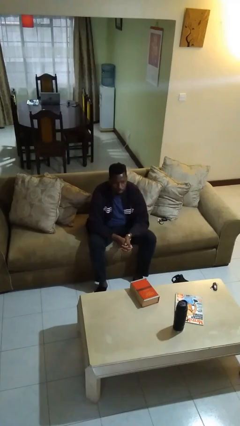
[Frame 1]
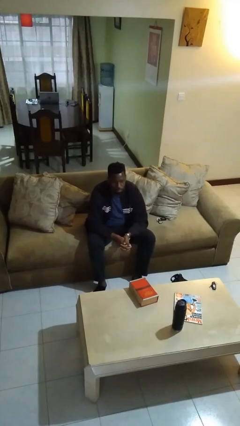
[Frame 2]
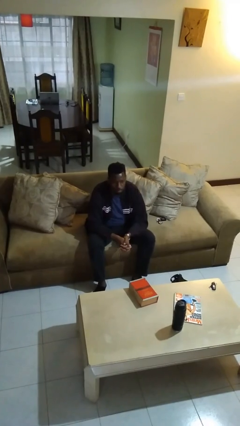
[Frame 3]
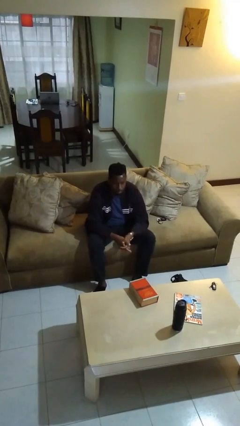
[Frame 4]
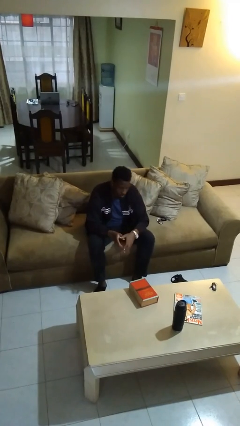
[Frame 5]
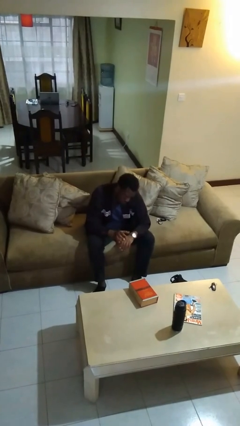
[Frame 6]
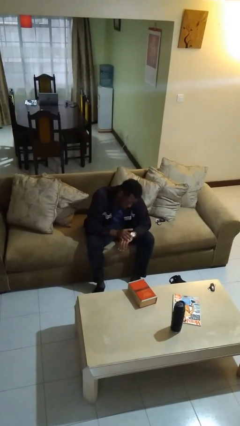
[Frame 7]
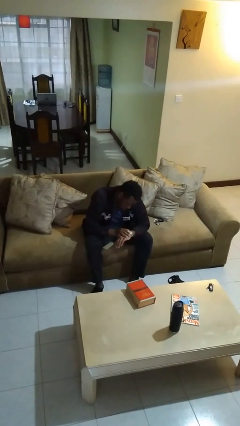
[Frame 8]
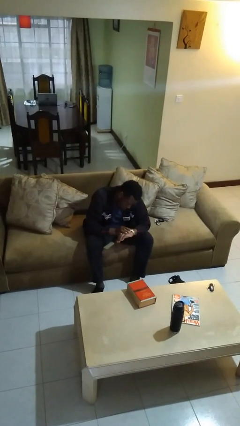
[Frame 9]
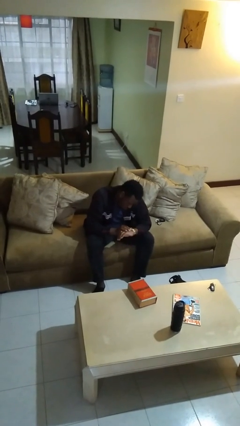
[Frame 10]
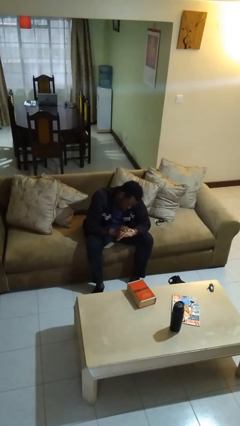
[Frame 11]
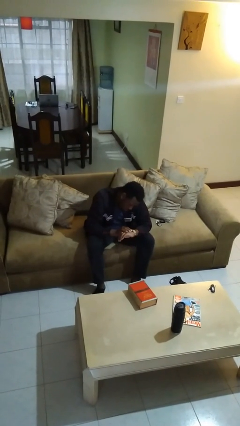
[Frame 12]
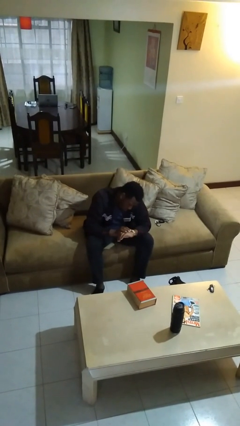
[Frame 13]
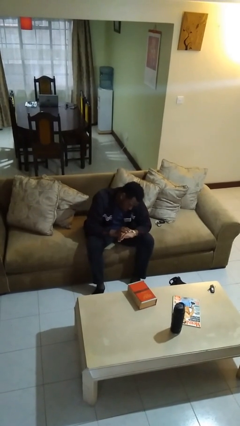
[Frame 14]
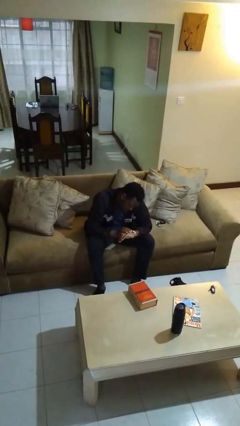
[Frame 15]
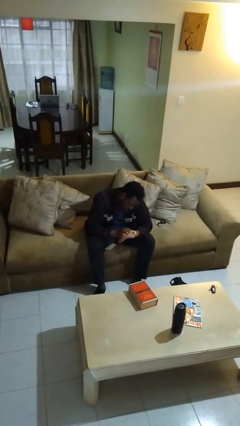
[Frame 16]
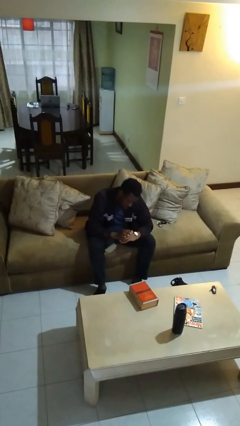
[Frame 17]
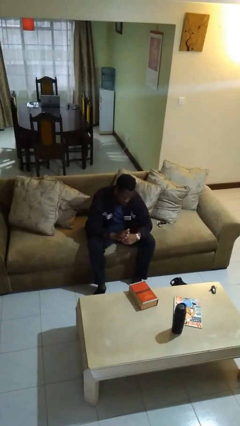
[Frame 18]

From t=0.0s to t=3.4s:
person looks at wristwatch

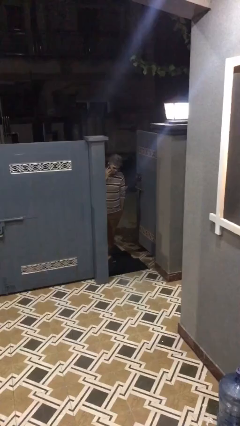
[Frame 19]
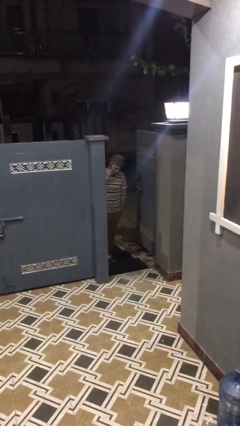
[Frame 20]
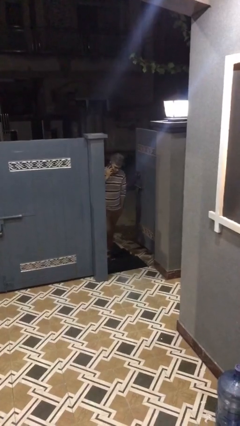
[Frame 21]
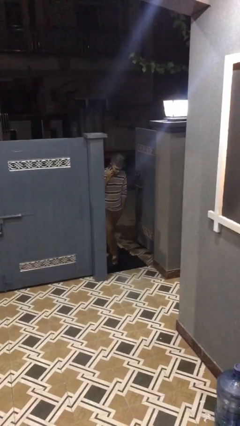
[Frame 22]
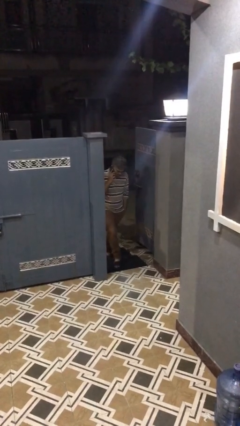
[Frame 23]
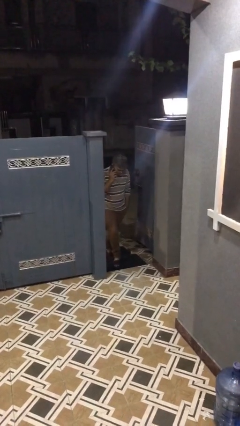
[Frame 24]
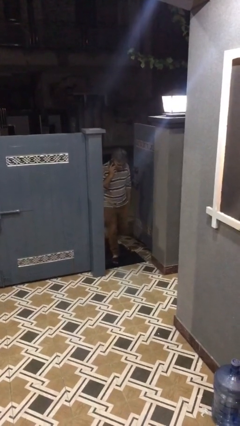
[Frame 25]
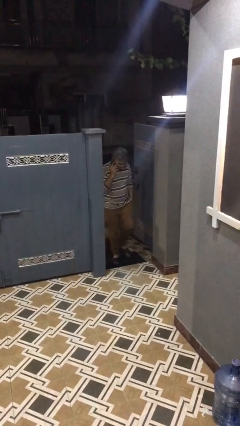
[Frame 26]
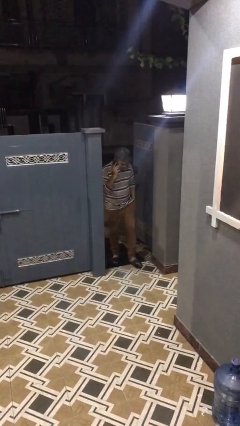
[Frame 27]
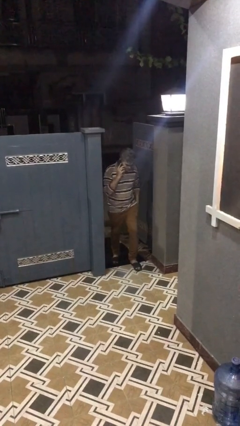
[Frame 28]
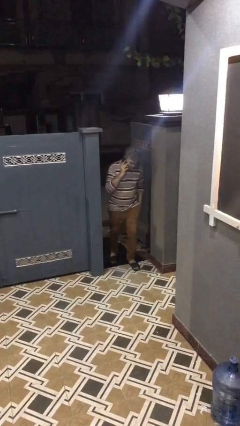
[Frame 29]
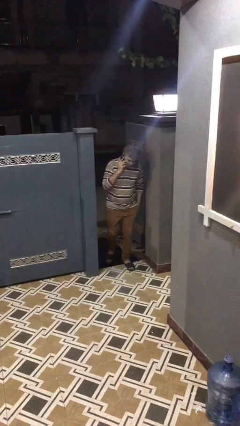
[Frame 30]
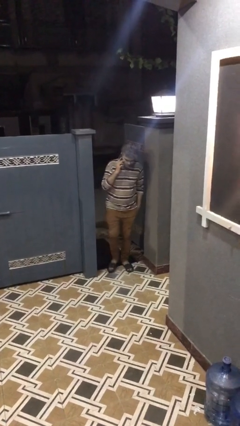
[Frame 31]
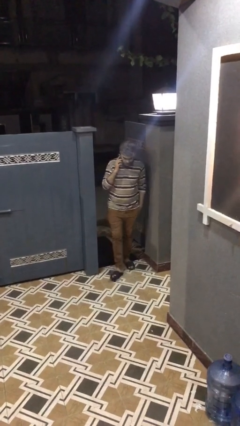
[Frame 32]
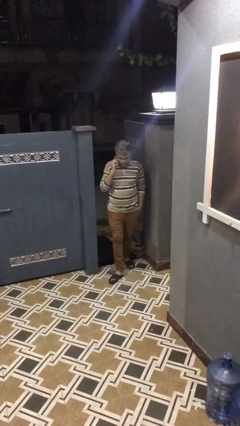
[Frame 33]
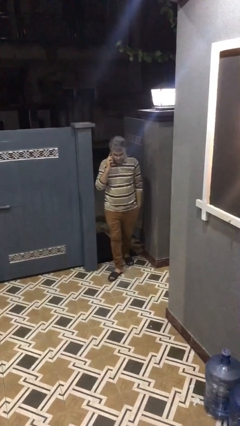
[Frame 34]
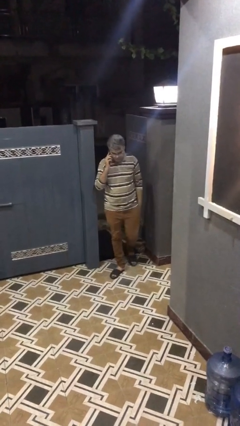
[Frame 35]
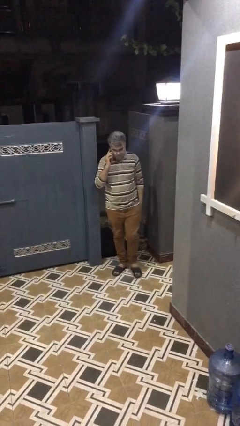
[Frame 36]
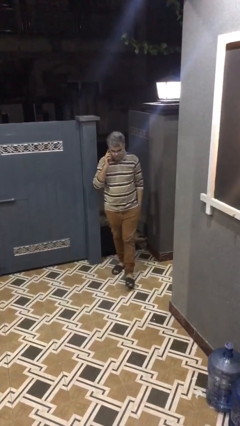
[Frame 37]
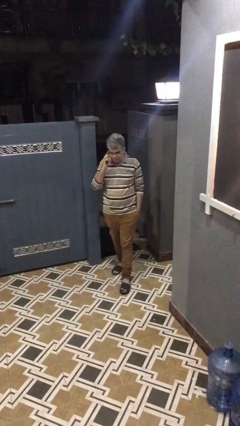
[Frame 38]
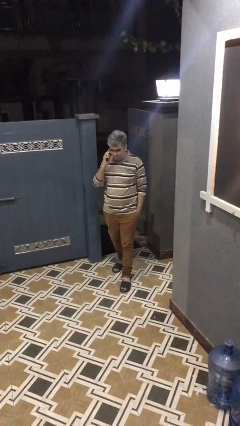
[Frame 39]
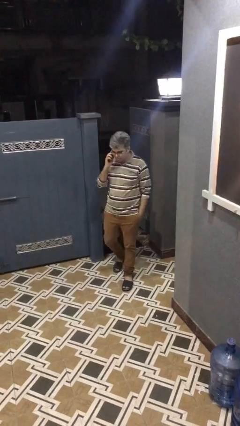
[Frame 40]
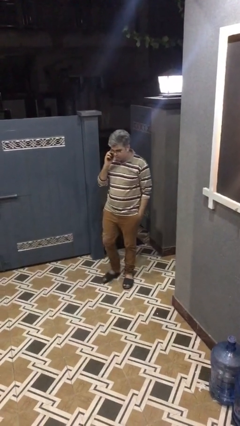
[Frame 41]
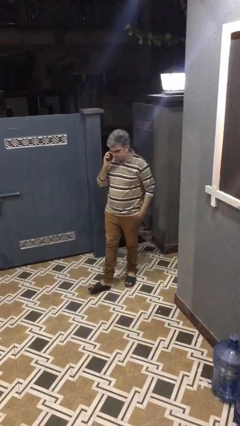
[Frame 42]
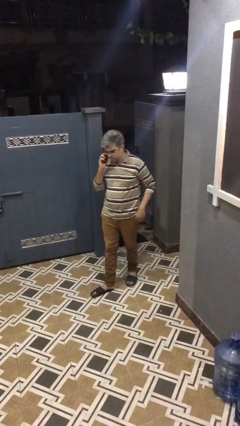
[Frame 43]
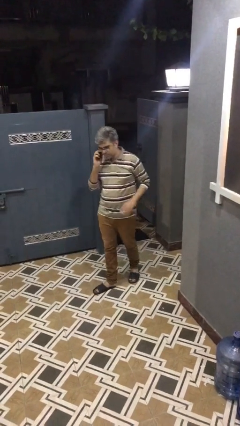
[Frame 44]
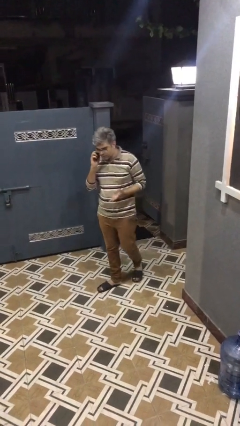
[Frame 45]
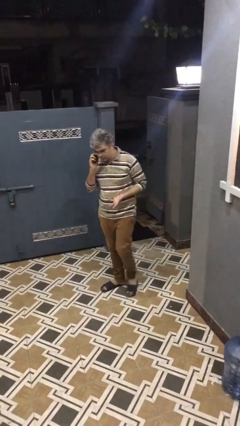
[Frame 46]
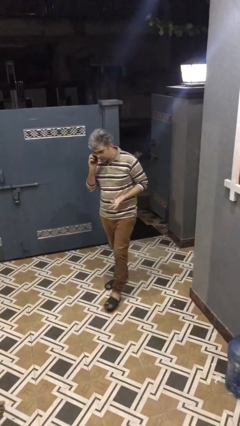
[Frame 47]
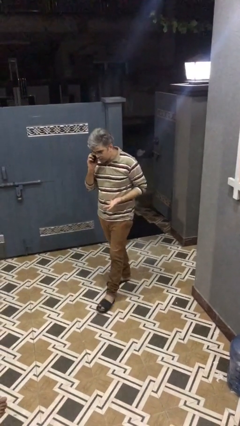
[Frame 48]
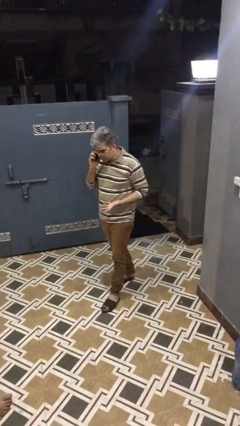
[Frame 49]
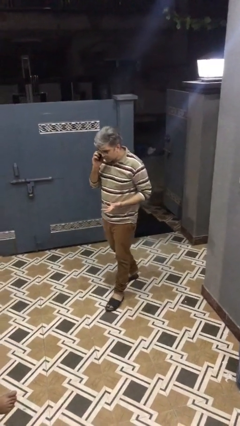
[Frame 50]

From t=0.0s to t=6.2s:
person enters scene through structure

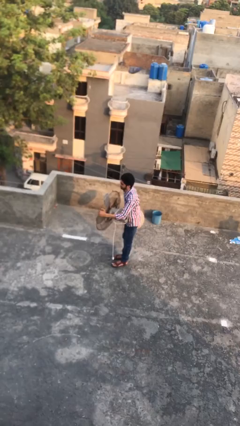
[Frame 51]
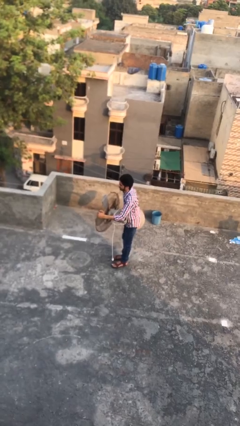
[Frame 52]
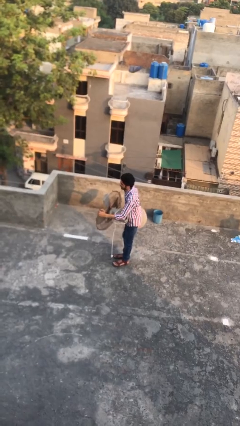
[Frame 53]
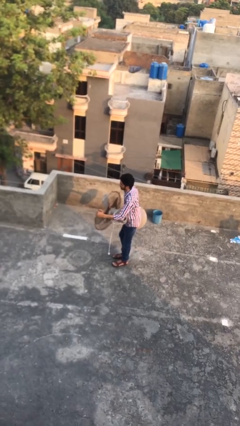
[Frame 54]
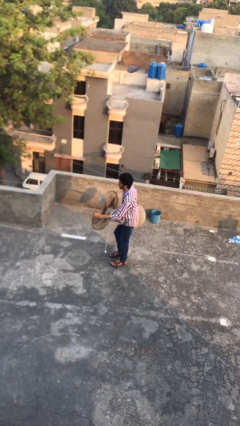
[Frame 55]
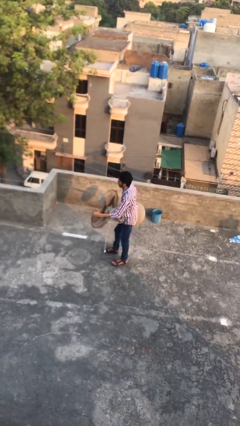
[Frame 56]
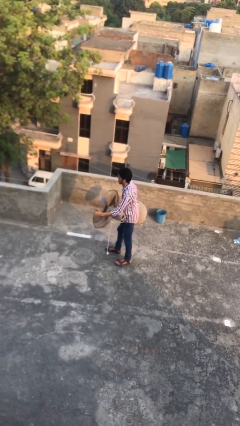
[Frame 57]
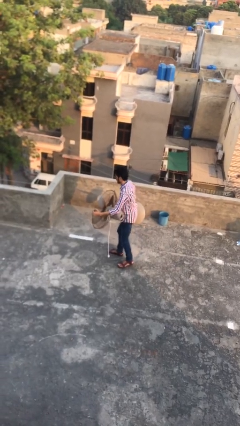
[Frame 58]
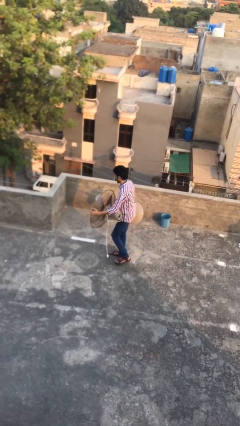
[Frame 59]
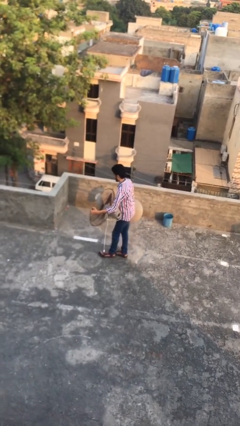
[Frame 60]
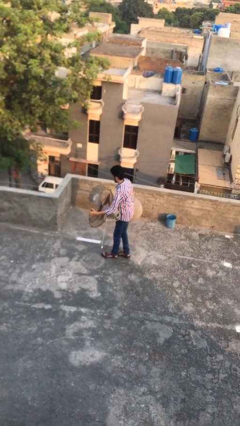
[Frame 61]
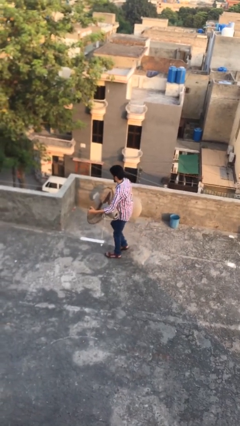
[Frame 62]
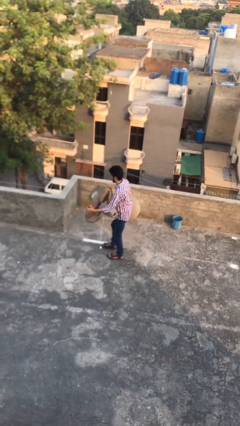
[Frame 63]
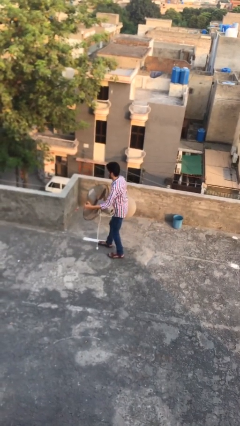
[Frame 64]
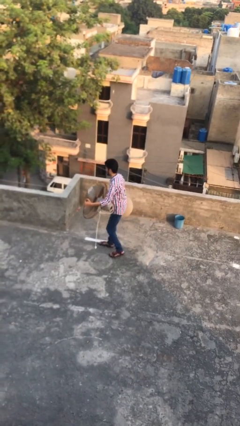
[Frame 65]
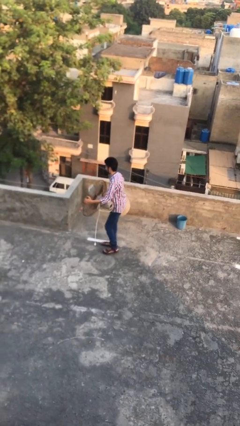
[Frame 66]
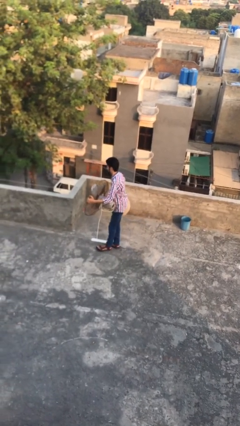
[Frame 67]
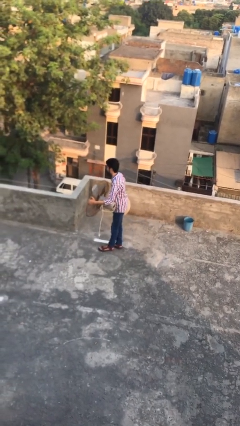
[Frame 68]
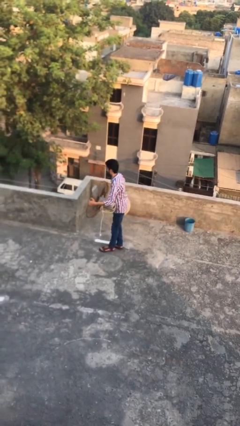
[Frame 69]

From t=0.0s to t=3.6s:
person carries heavy object

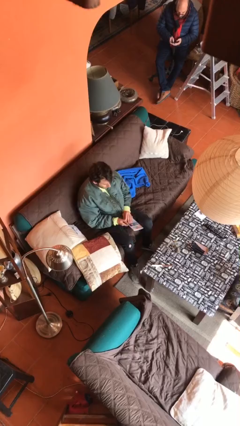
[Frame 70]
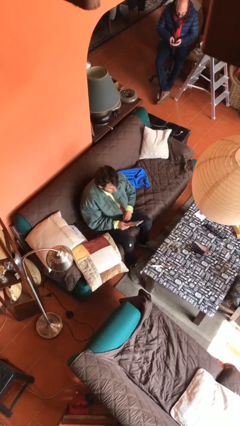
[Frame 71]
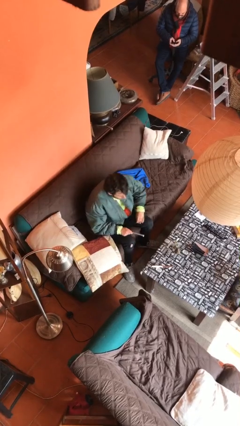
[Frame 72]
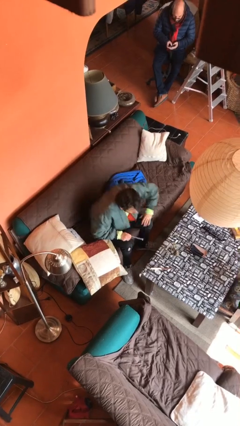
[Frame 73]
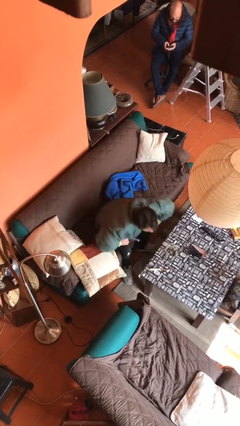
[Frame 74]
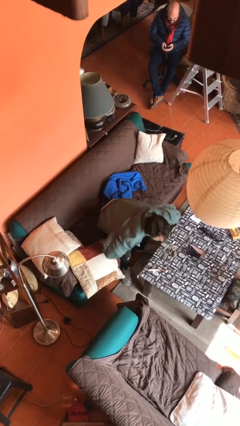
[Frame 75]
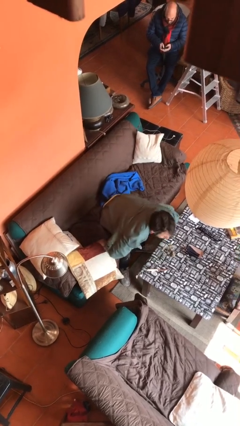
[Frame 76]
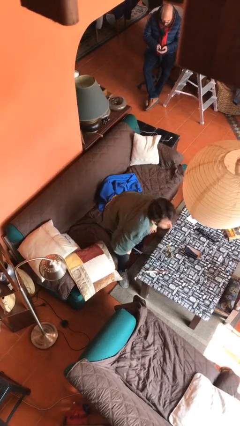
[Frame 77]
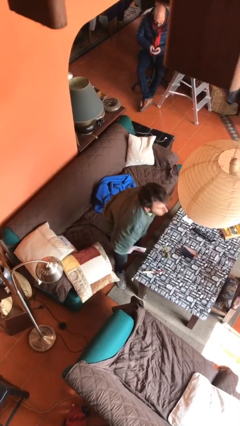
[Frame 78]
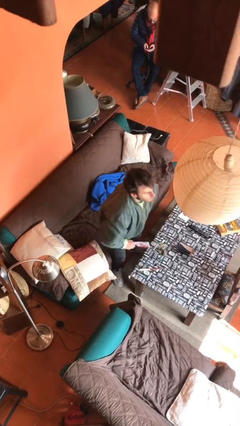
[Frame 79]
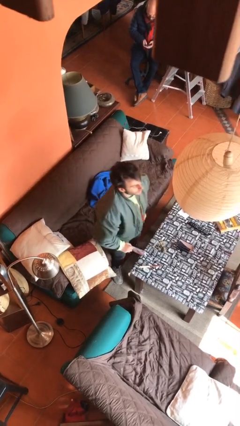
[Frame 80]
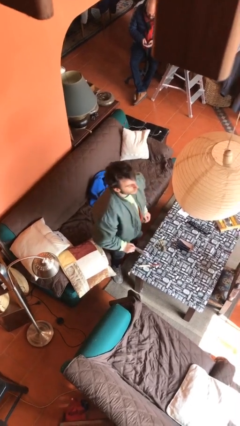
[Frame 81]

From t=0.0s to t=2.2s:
person stands up

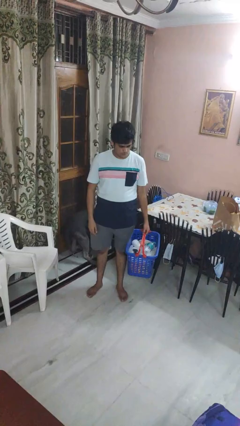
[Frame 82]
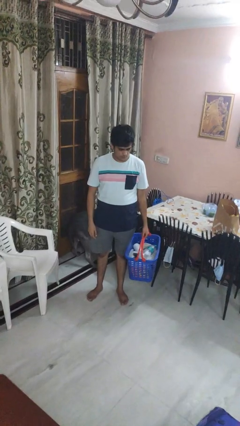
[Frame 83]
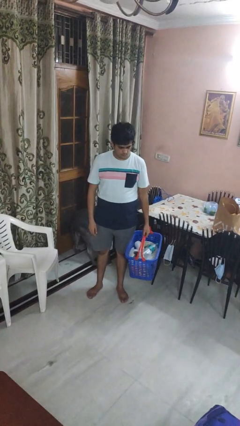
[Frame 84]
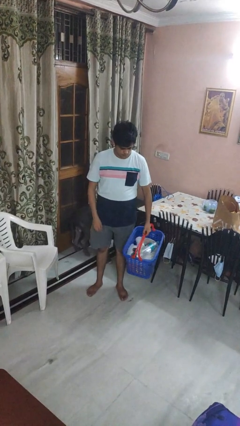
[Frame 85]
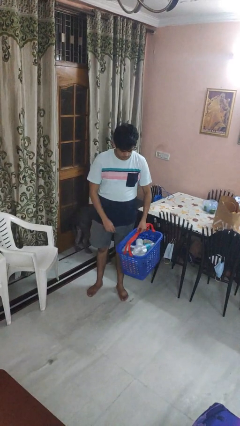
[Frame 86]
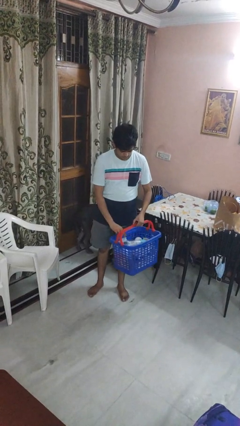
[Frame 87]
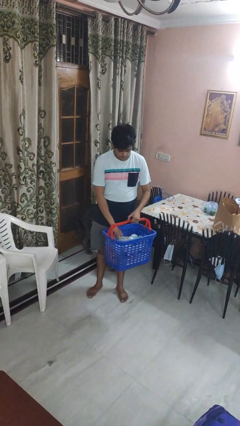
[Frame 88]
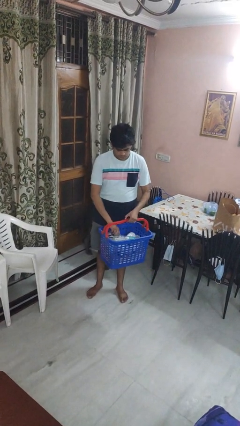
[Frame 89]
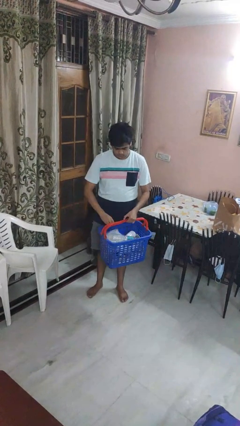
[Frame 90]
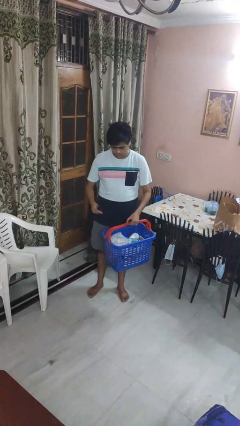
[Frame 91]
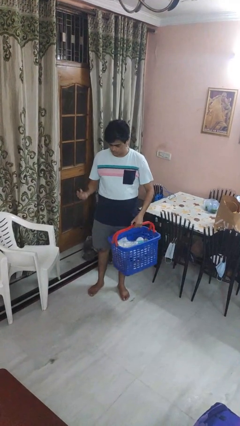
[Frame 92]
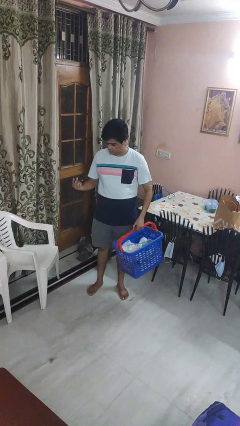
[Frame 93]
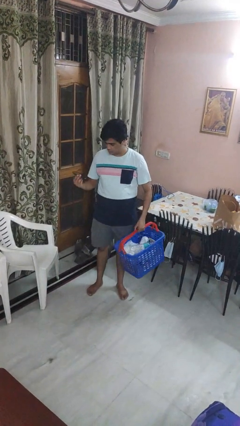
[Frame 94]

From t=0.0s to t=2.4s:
person takes object from basket
